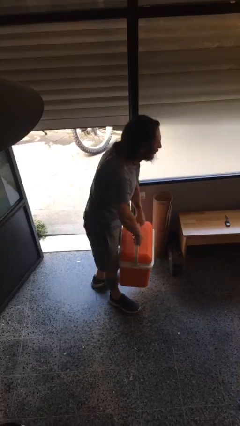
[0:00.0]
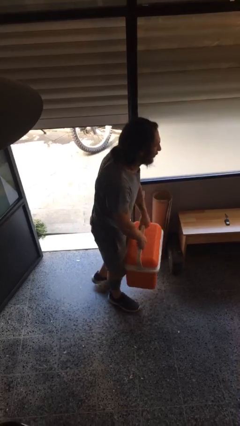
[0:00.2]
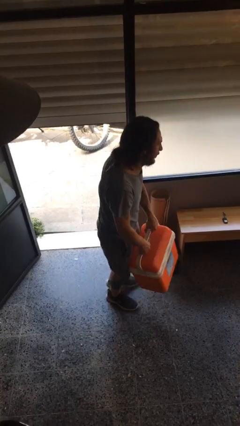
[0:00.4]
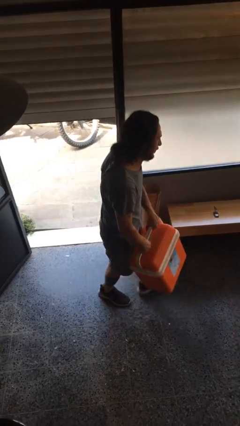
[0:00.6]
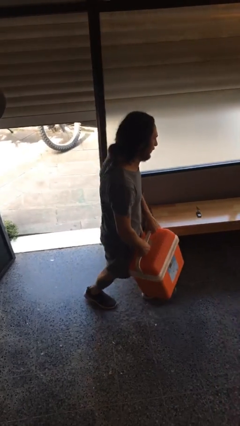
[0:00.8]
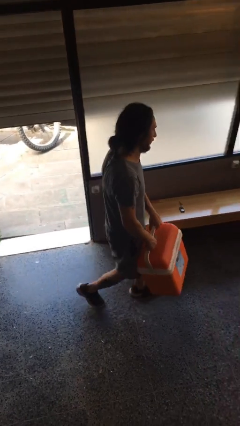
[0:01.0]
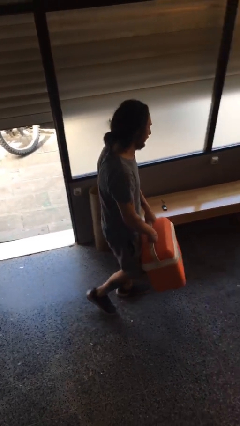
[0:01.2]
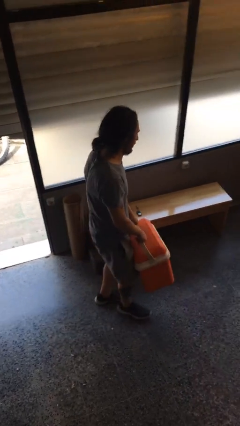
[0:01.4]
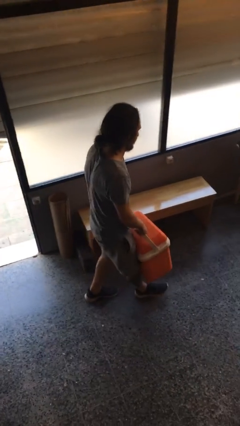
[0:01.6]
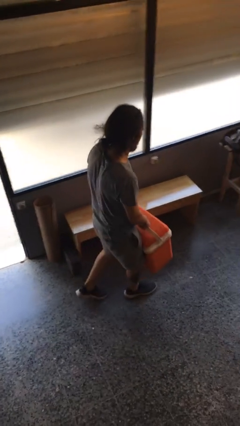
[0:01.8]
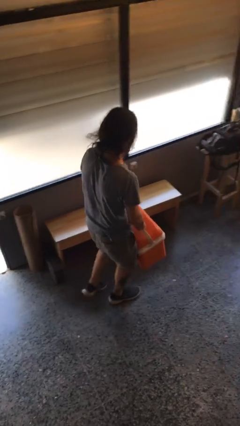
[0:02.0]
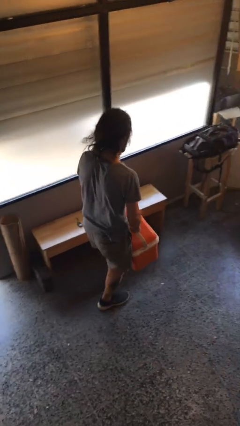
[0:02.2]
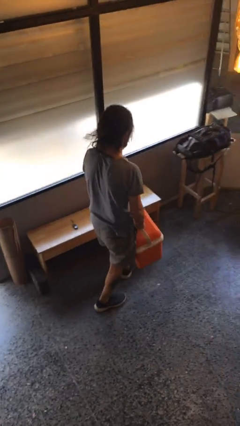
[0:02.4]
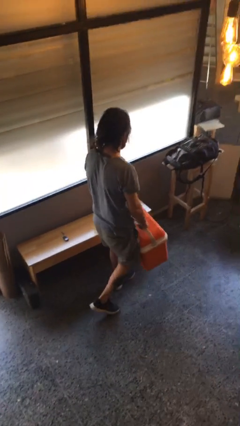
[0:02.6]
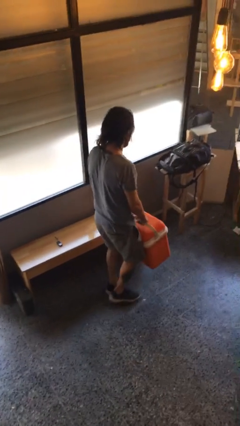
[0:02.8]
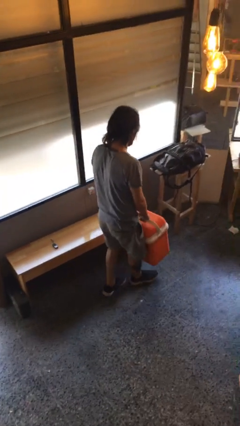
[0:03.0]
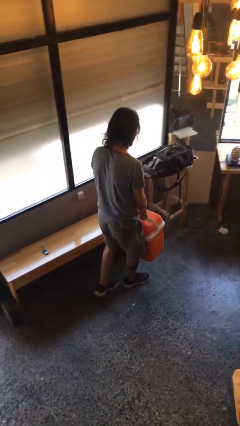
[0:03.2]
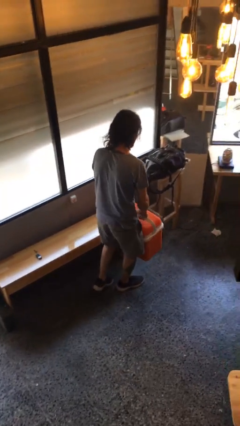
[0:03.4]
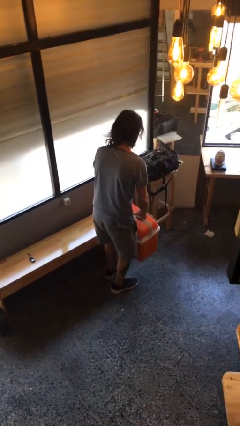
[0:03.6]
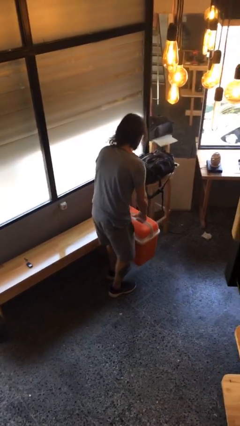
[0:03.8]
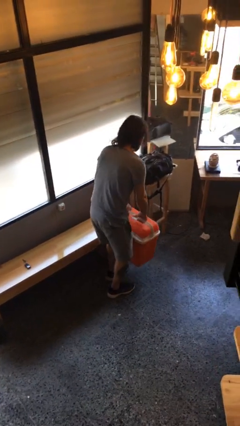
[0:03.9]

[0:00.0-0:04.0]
person carries heavy object

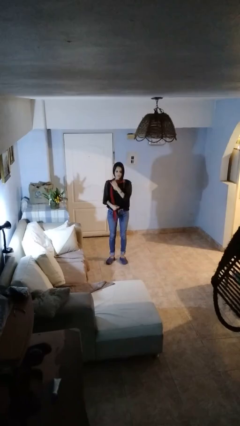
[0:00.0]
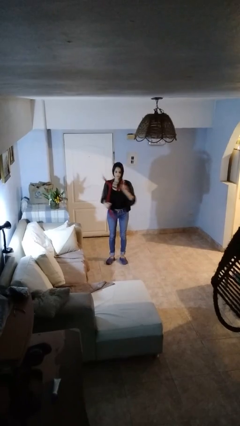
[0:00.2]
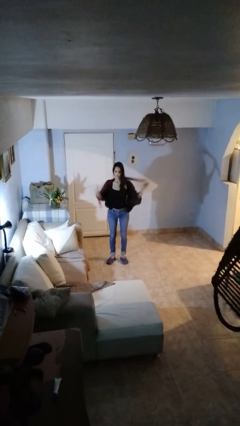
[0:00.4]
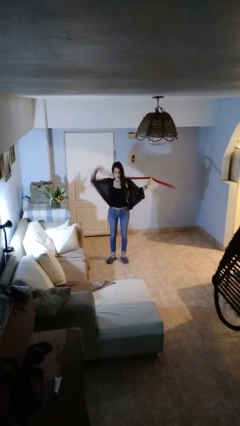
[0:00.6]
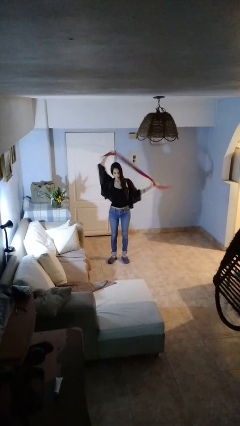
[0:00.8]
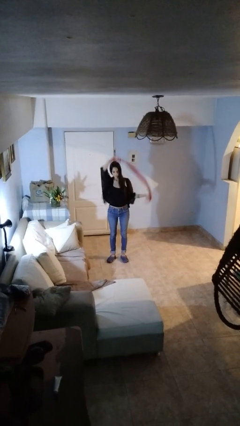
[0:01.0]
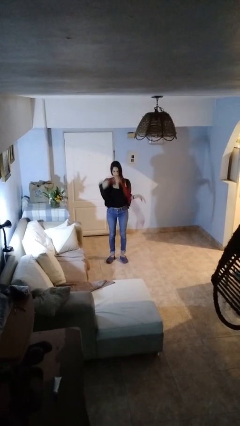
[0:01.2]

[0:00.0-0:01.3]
person takes off scarf

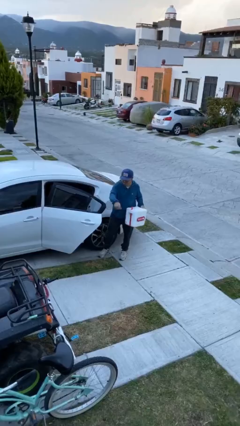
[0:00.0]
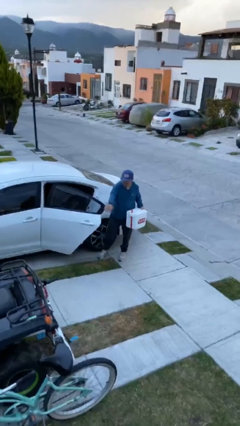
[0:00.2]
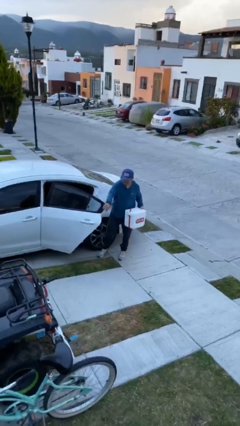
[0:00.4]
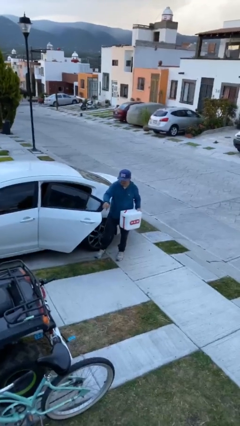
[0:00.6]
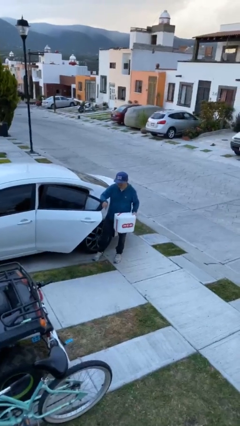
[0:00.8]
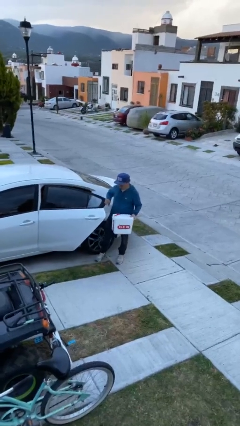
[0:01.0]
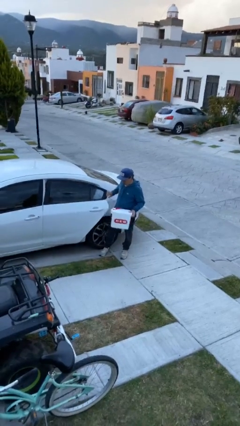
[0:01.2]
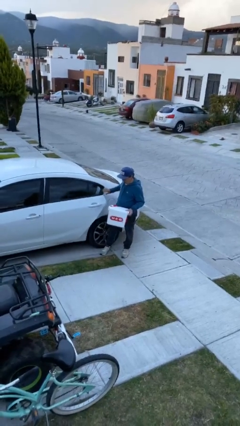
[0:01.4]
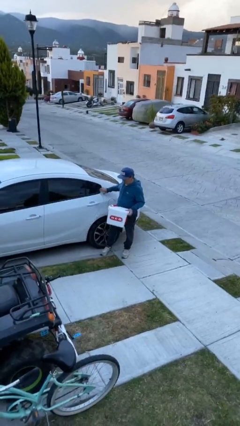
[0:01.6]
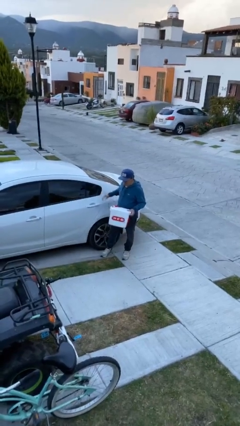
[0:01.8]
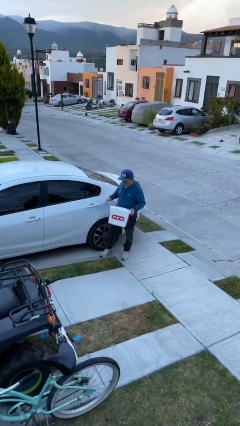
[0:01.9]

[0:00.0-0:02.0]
person closes car door

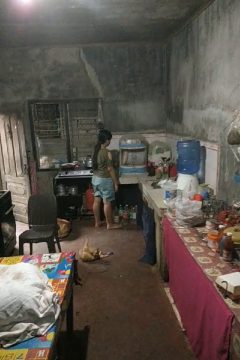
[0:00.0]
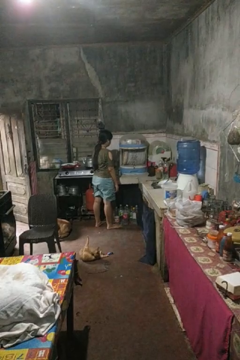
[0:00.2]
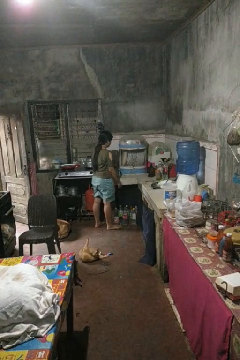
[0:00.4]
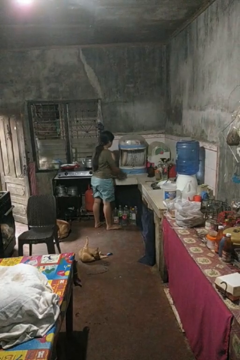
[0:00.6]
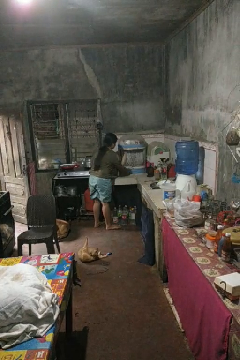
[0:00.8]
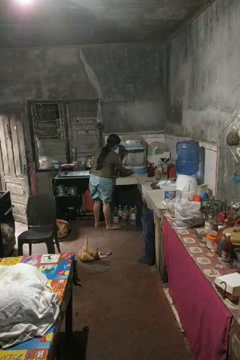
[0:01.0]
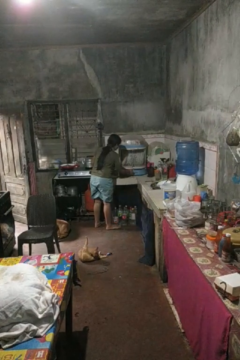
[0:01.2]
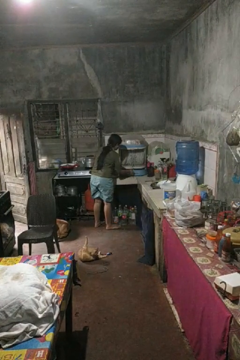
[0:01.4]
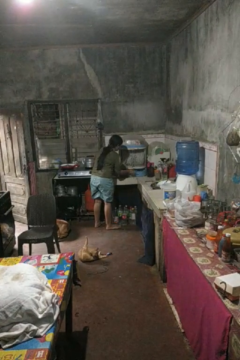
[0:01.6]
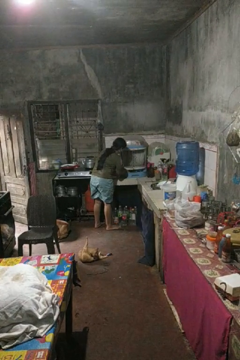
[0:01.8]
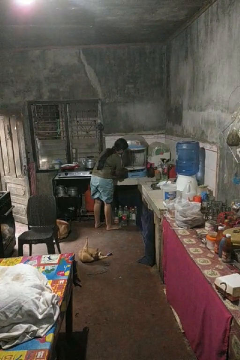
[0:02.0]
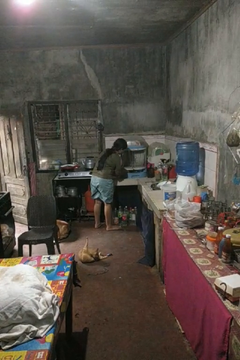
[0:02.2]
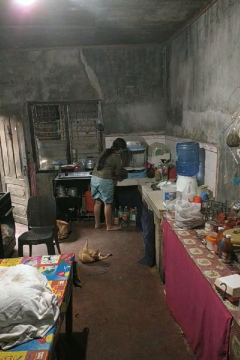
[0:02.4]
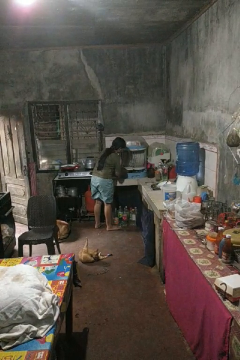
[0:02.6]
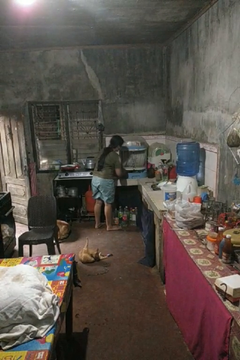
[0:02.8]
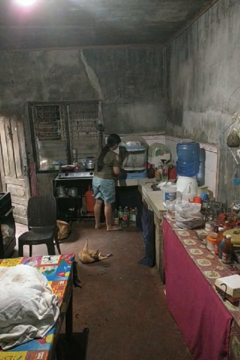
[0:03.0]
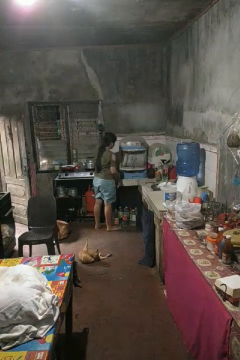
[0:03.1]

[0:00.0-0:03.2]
person searches in kitchen drawer

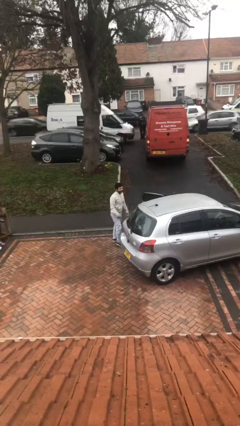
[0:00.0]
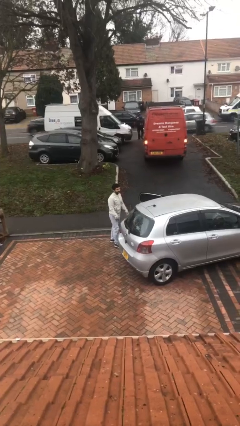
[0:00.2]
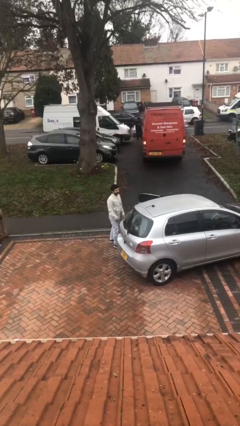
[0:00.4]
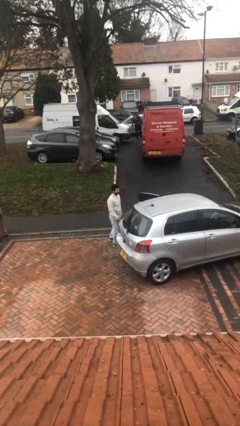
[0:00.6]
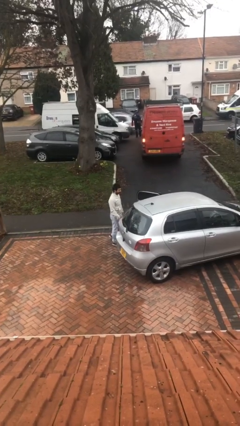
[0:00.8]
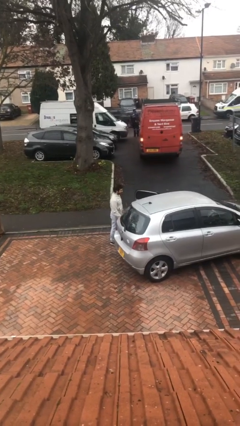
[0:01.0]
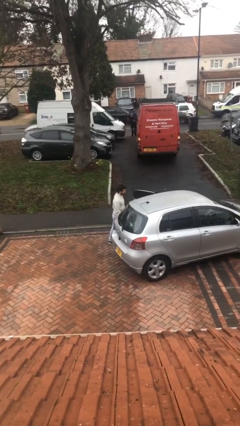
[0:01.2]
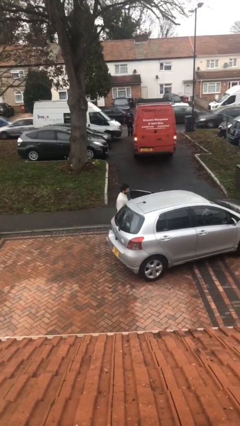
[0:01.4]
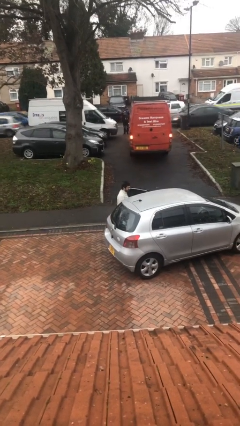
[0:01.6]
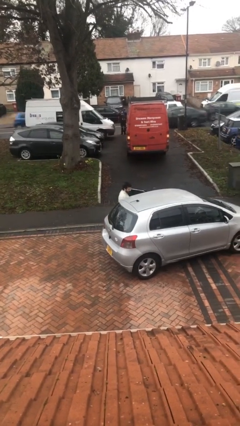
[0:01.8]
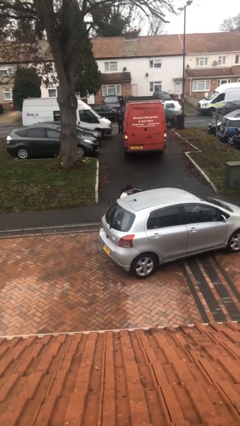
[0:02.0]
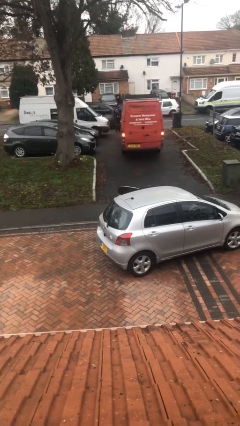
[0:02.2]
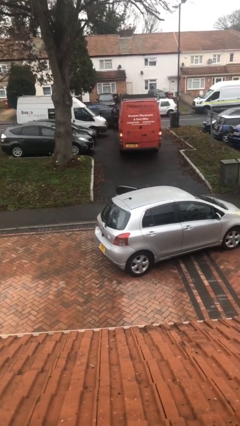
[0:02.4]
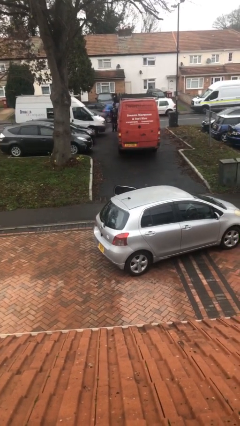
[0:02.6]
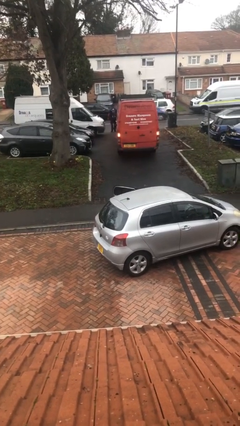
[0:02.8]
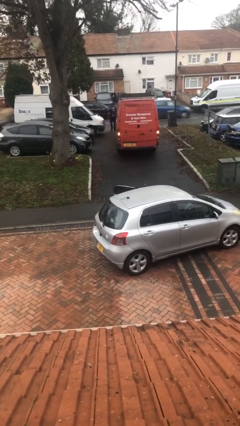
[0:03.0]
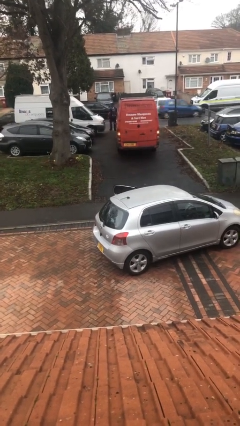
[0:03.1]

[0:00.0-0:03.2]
person enters car

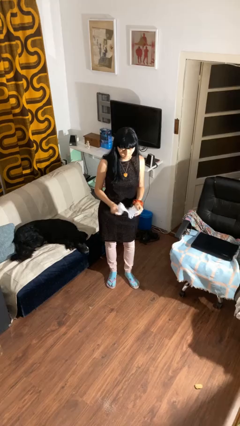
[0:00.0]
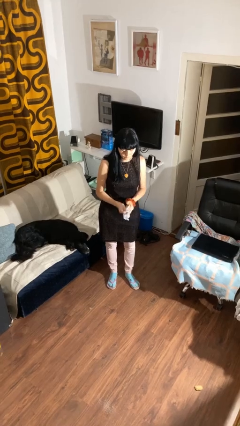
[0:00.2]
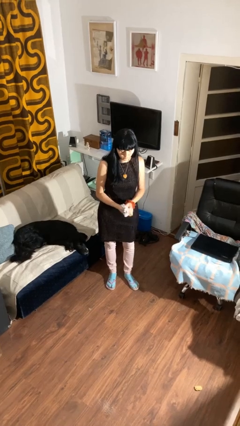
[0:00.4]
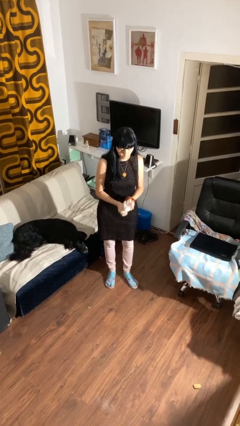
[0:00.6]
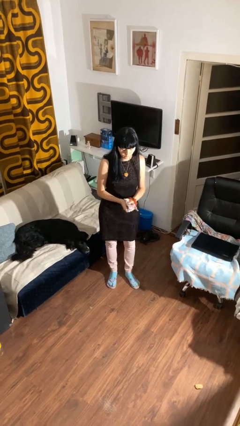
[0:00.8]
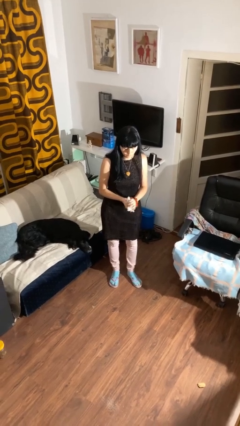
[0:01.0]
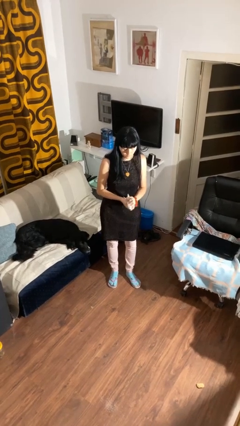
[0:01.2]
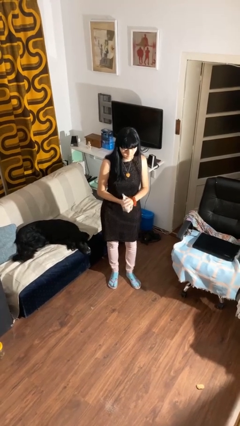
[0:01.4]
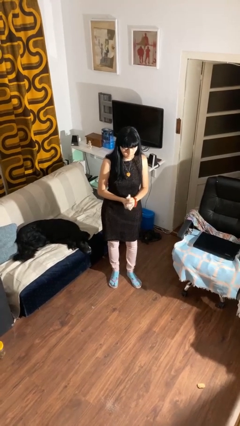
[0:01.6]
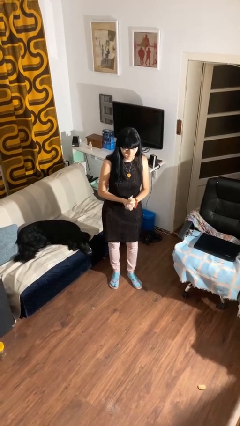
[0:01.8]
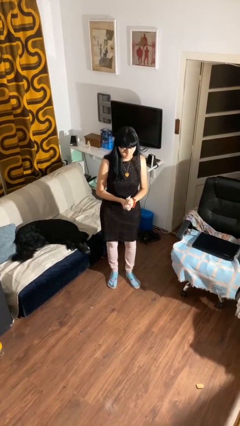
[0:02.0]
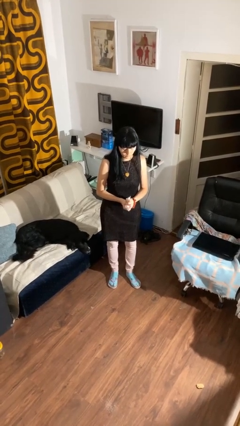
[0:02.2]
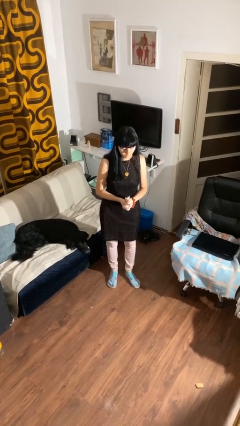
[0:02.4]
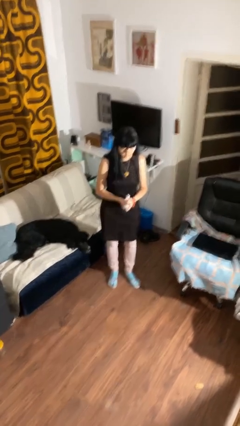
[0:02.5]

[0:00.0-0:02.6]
person crumples paper

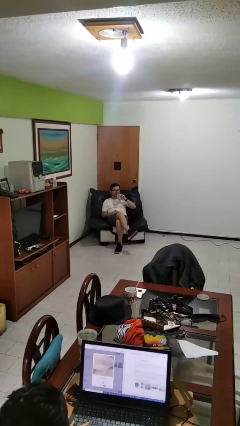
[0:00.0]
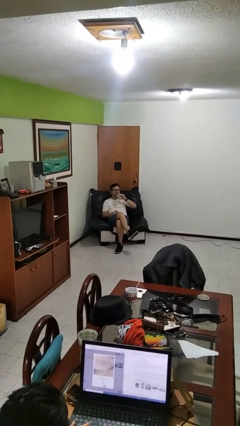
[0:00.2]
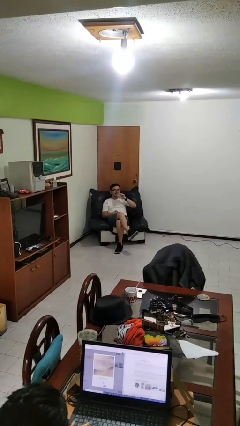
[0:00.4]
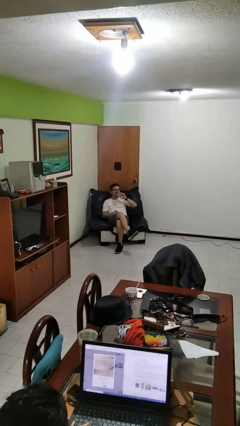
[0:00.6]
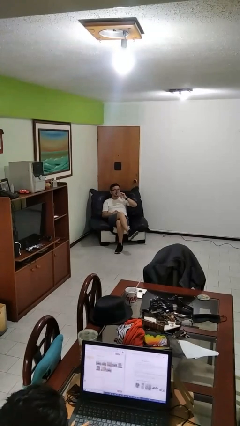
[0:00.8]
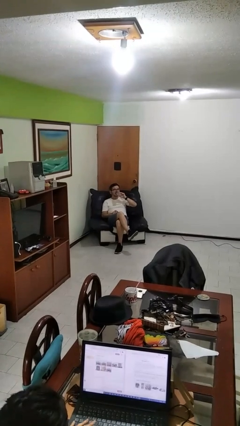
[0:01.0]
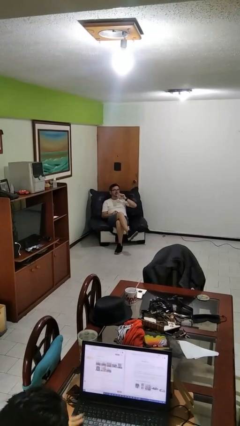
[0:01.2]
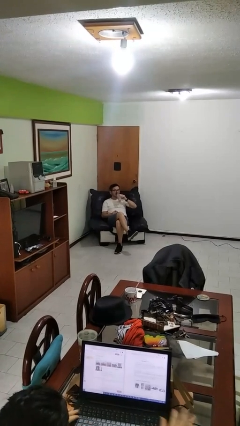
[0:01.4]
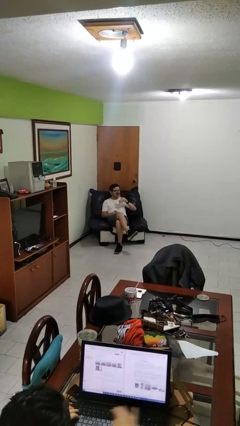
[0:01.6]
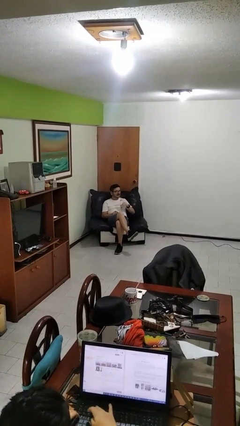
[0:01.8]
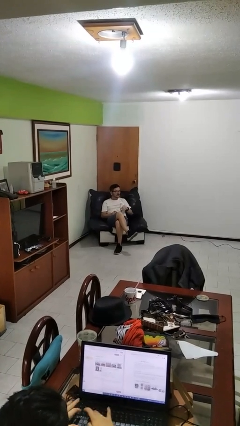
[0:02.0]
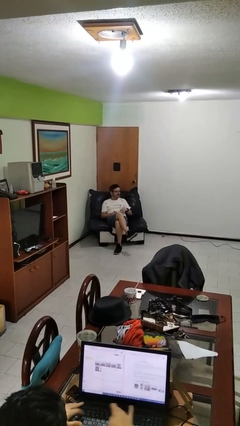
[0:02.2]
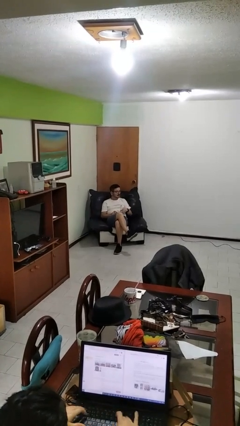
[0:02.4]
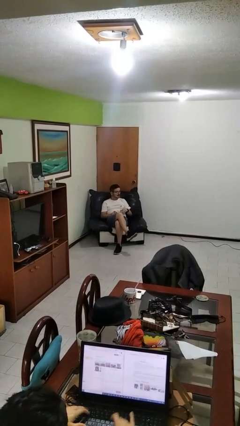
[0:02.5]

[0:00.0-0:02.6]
person drinks from bottle
